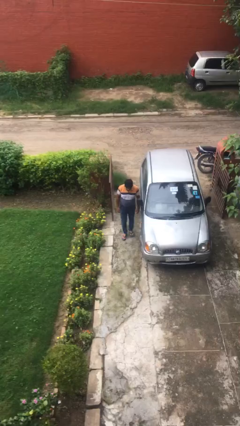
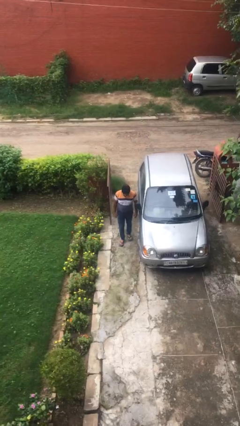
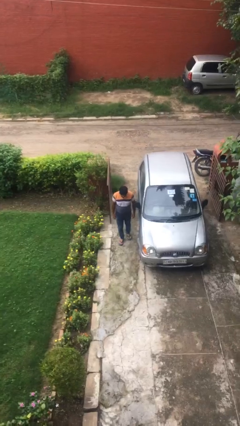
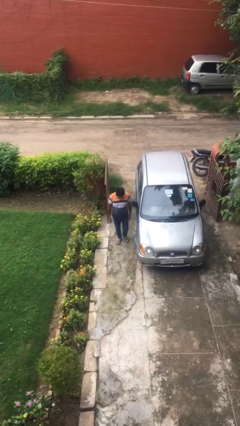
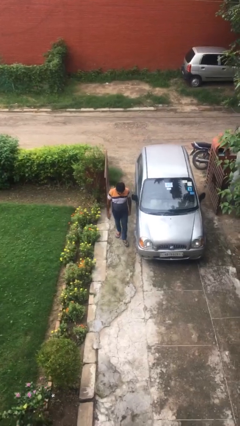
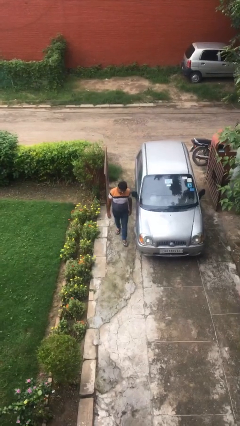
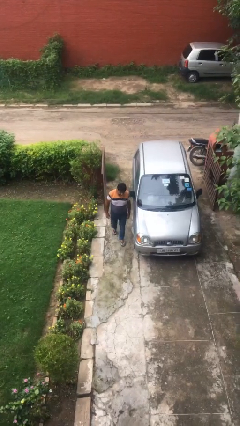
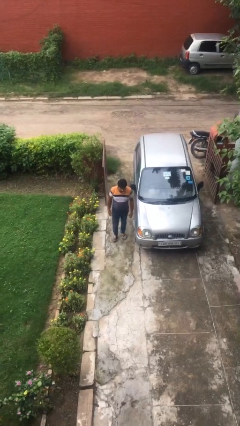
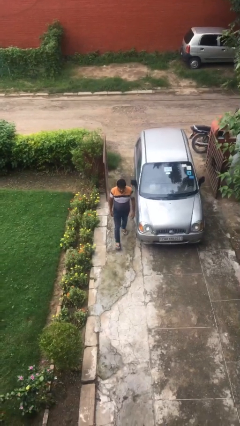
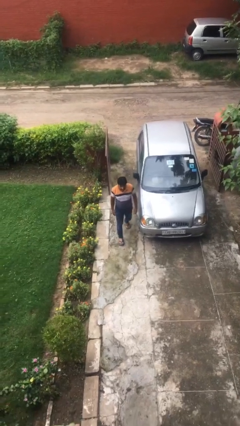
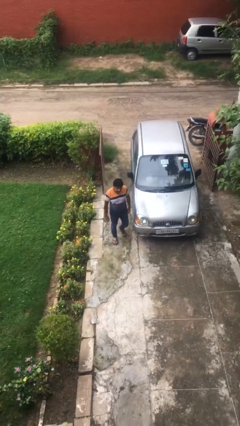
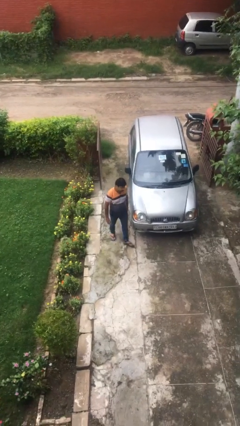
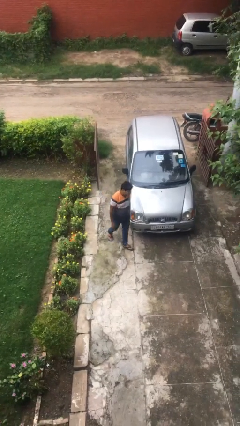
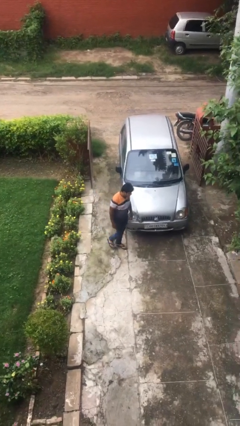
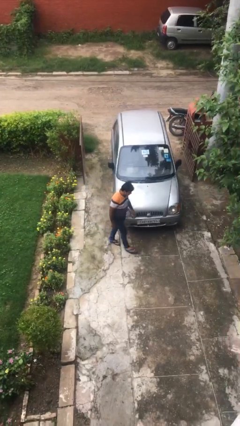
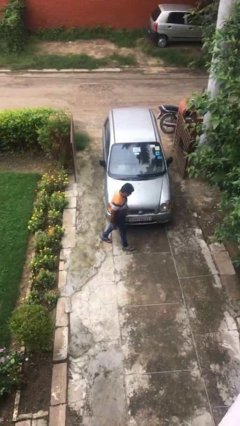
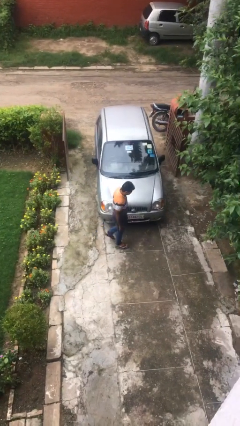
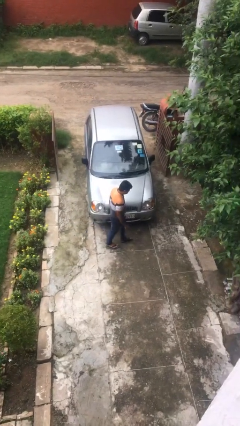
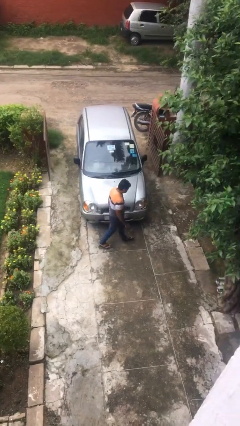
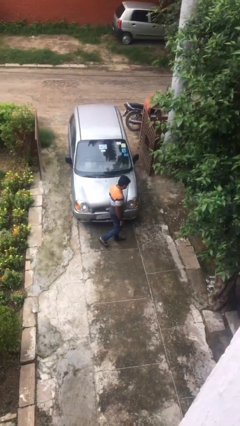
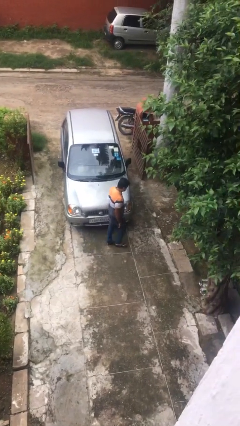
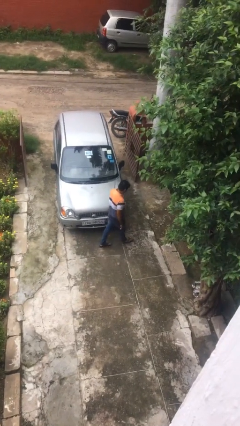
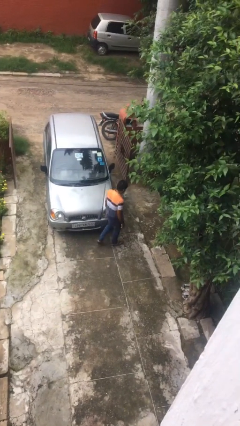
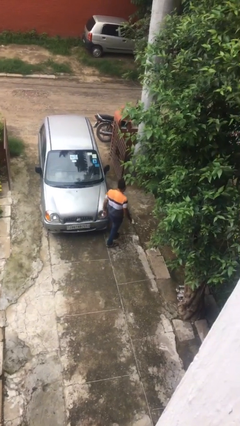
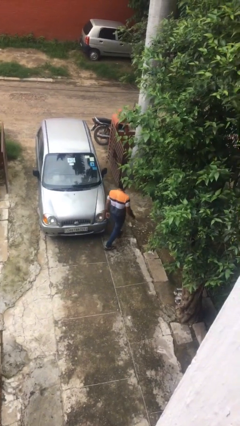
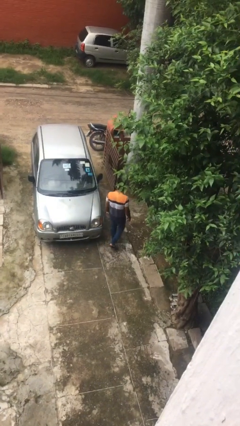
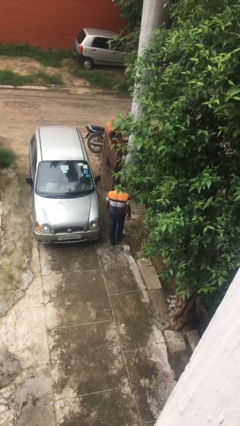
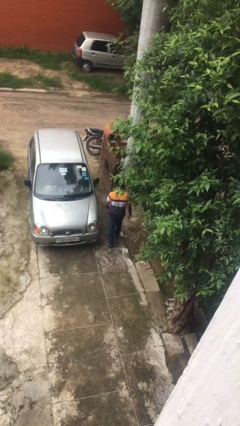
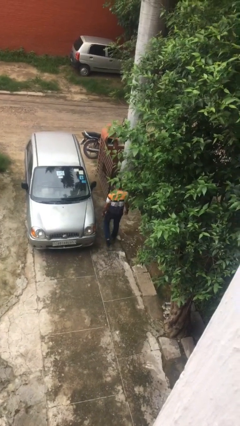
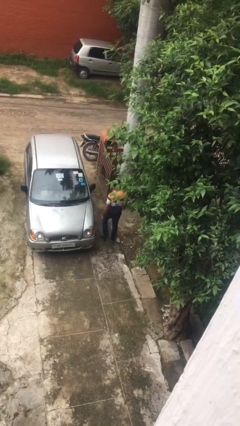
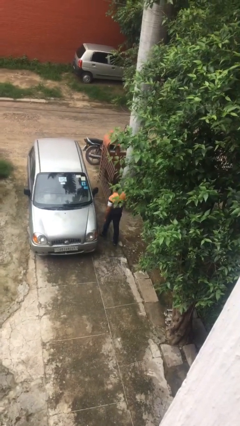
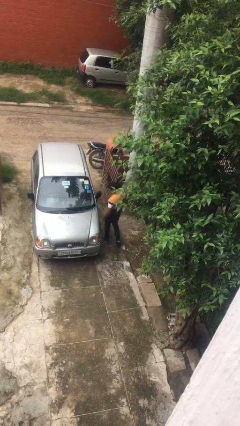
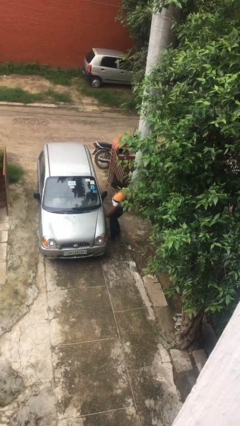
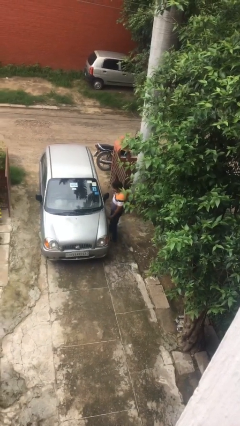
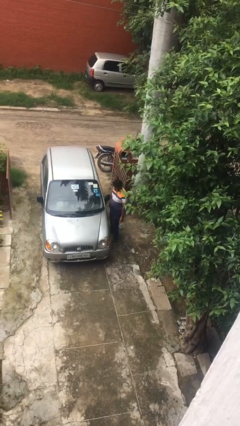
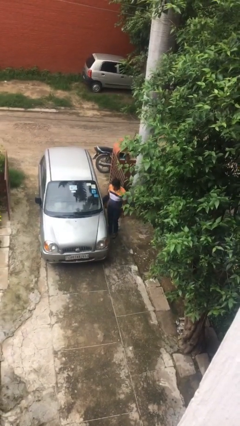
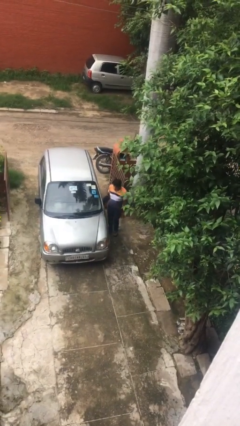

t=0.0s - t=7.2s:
person walks around car

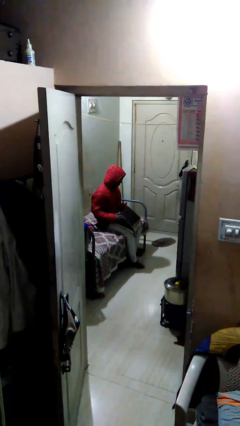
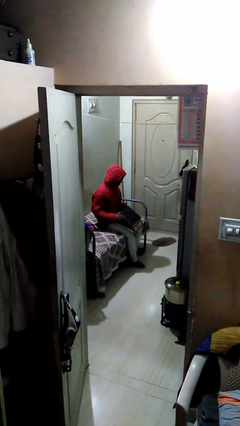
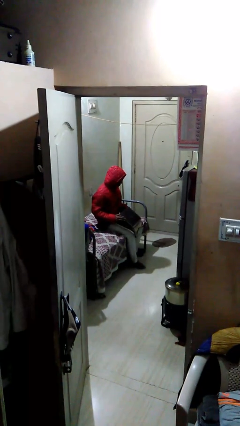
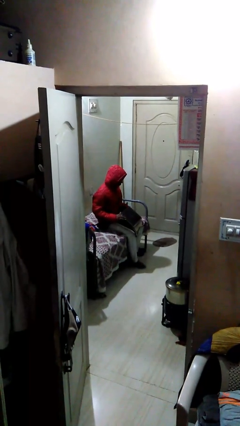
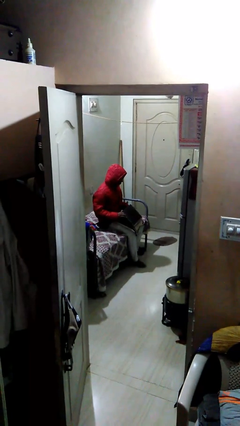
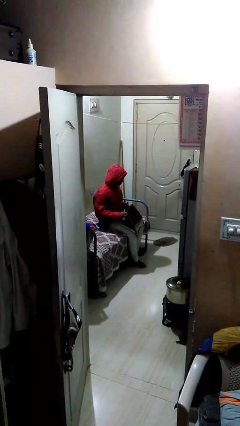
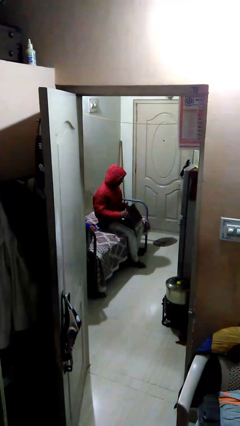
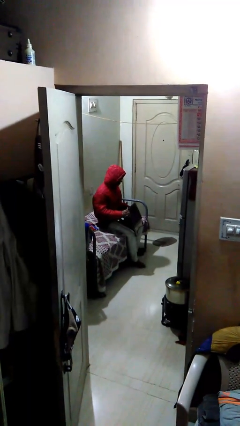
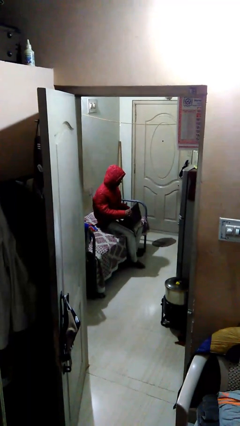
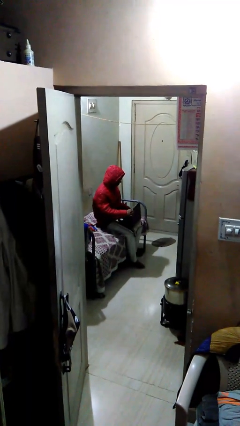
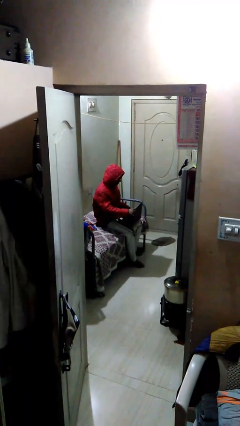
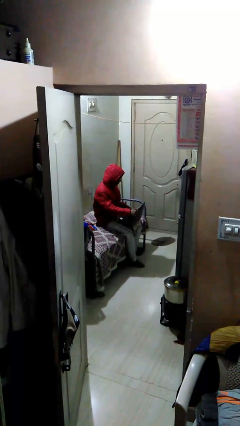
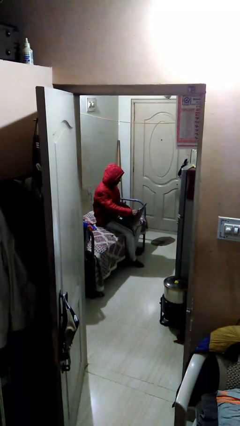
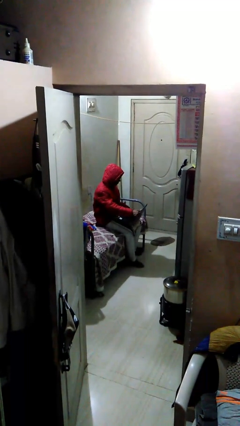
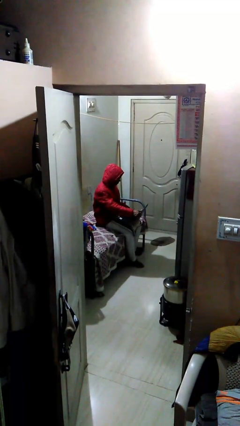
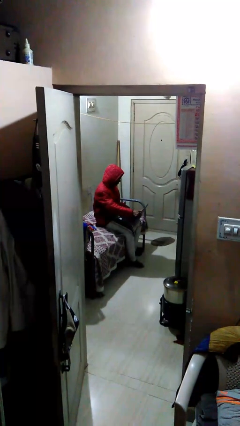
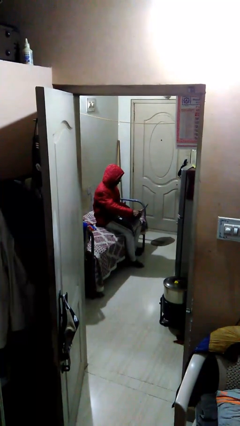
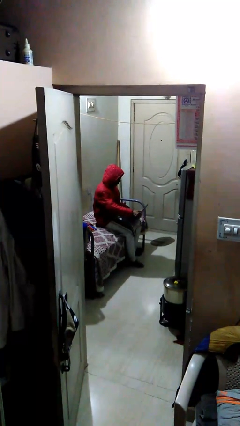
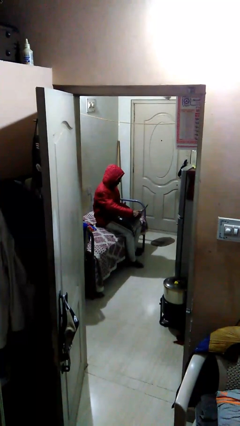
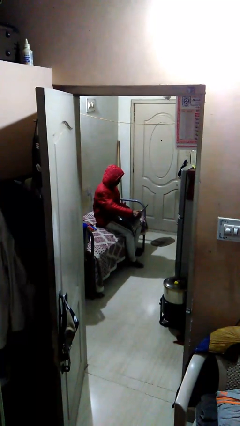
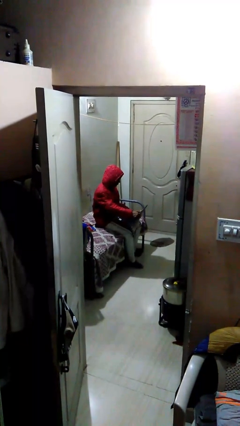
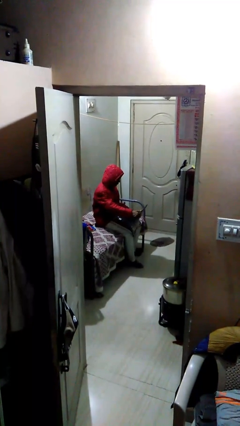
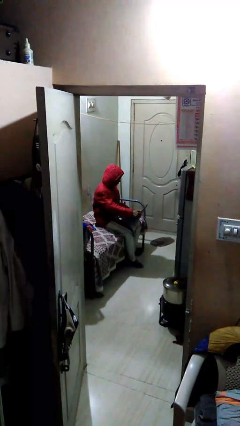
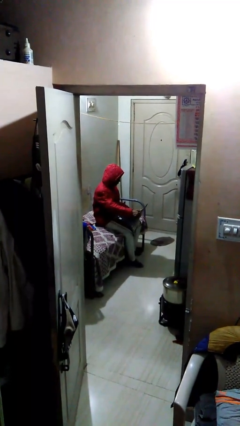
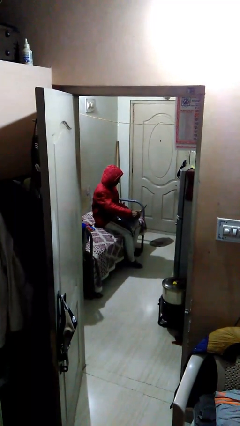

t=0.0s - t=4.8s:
person interacts with laptop

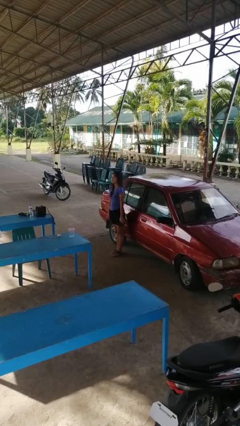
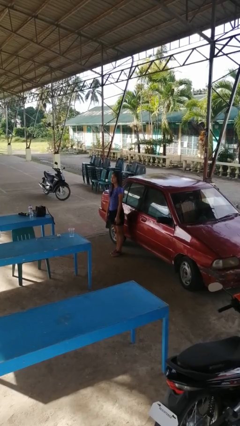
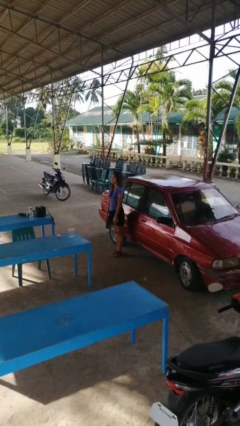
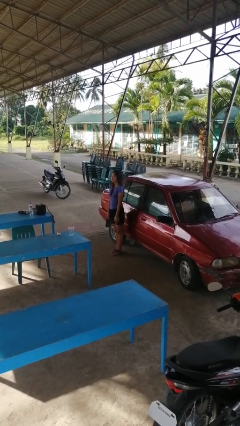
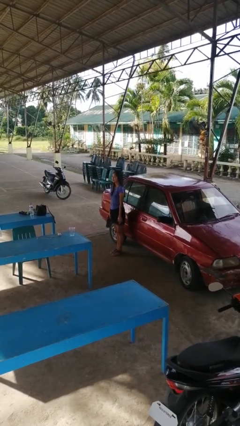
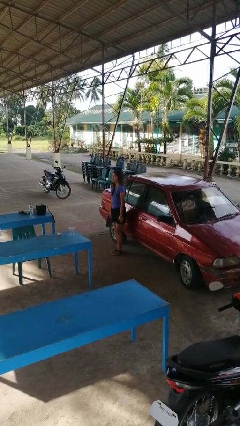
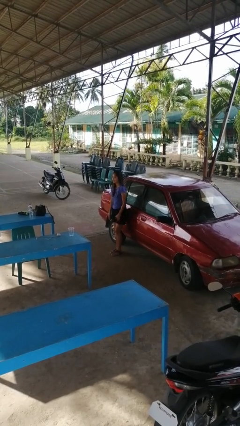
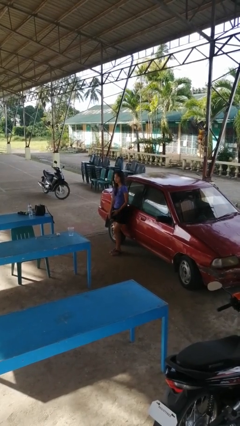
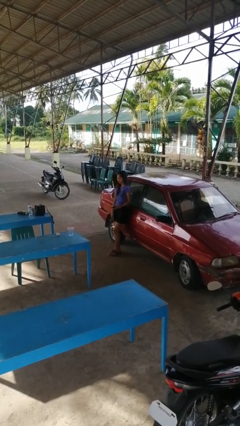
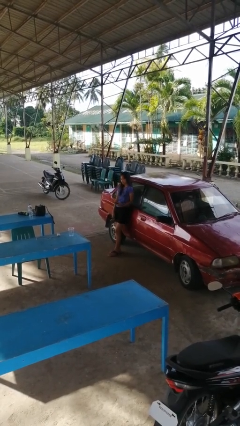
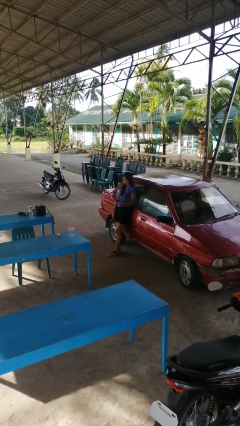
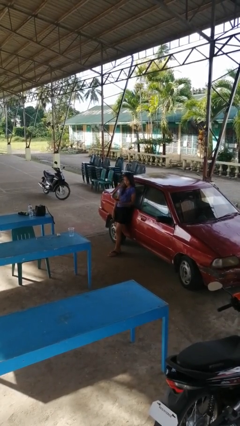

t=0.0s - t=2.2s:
person leans against car

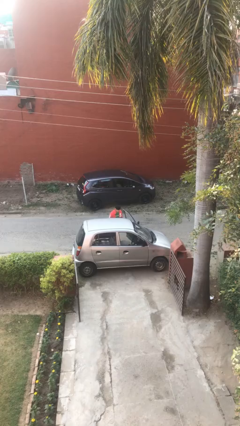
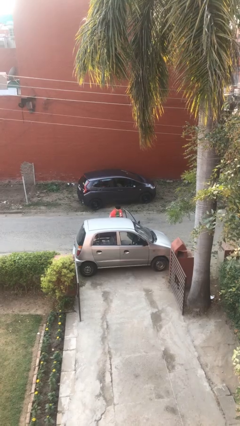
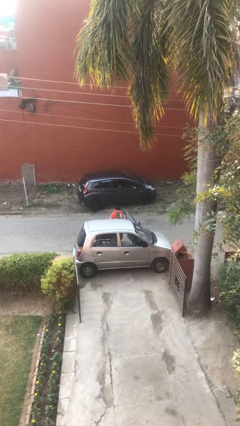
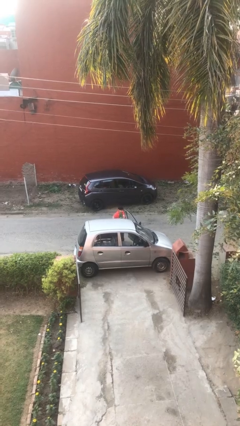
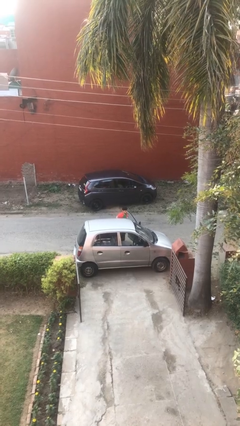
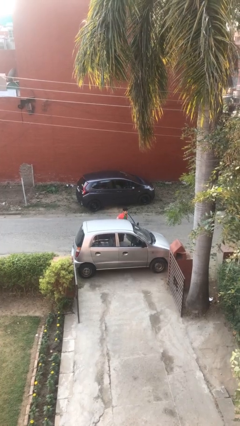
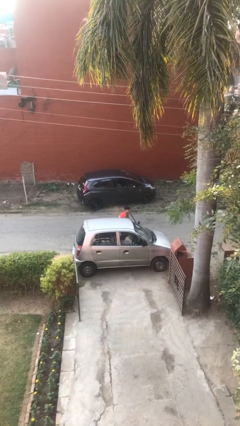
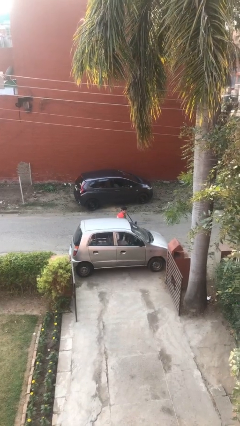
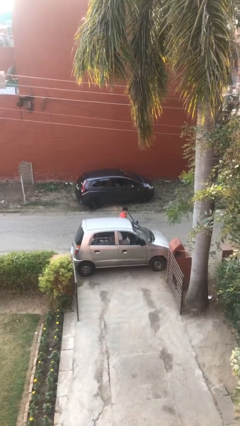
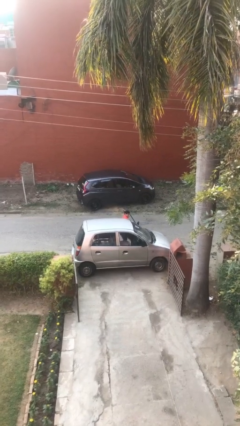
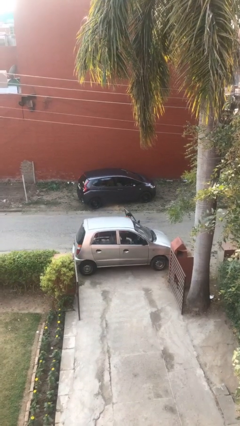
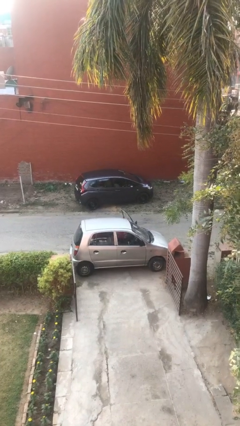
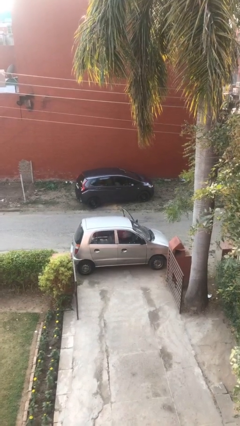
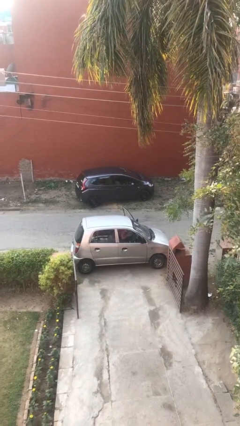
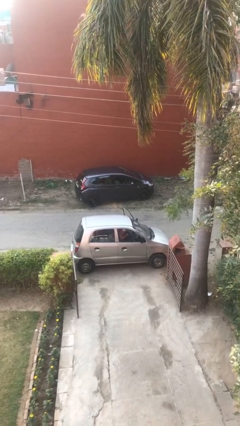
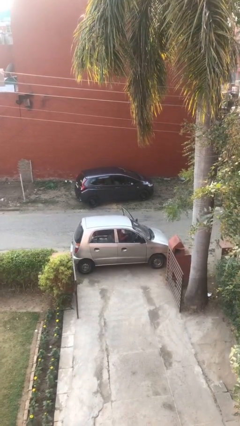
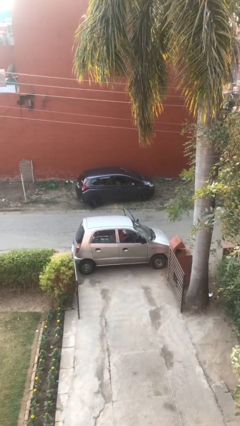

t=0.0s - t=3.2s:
person enters car

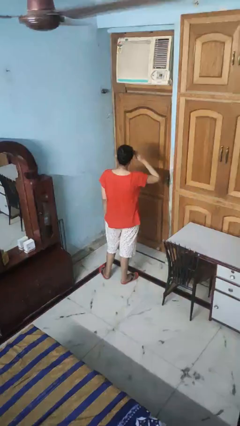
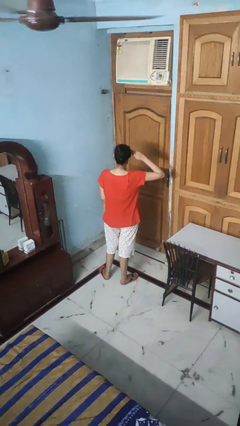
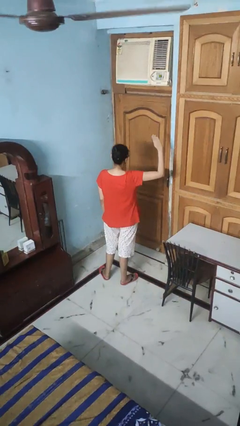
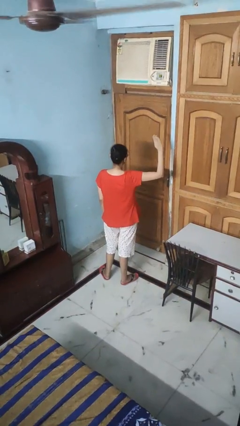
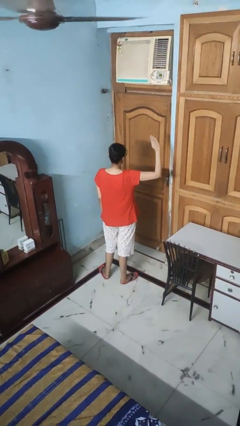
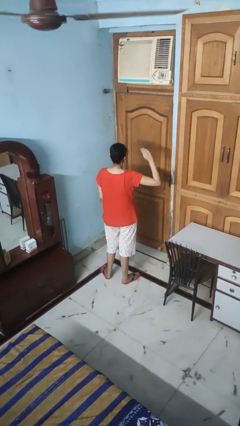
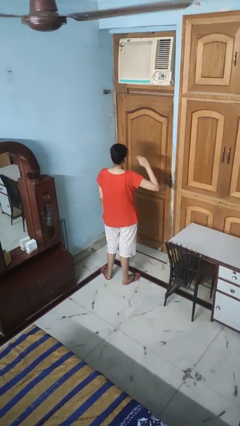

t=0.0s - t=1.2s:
person salutes
